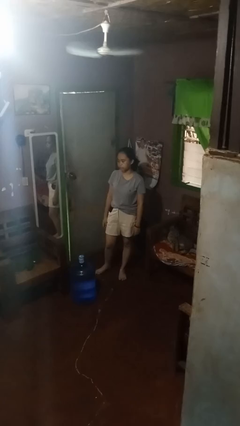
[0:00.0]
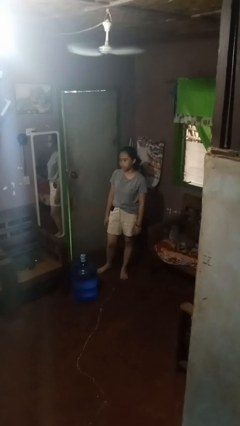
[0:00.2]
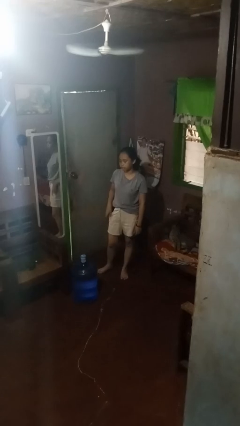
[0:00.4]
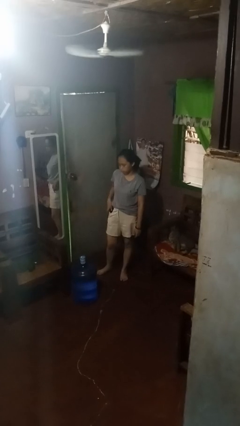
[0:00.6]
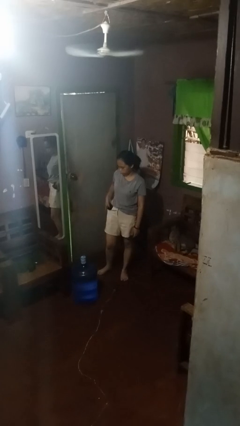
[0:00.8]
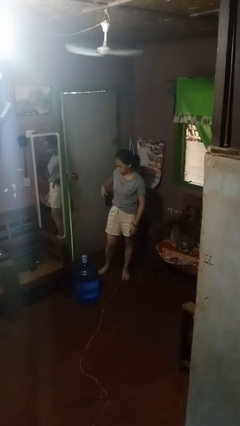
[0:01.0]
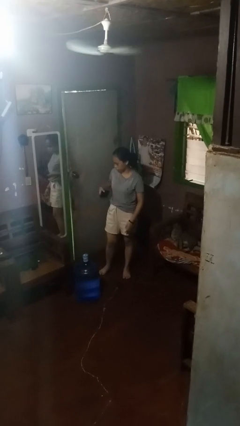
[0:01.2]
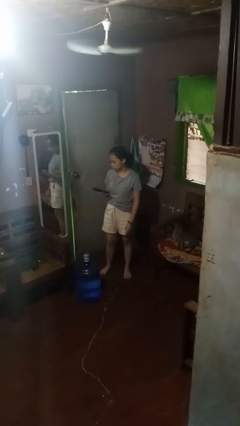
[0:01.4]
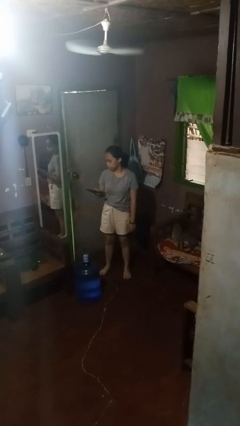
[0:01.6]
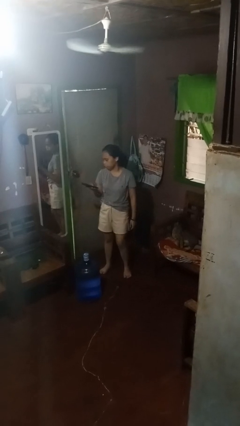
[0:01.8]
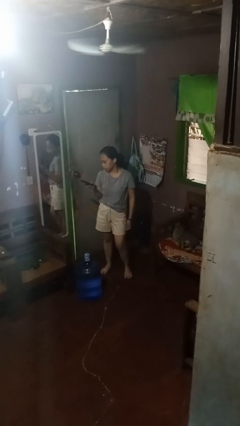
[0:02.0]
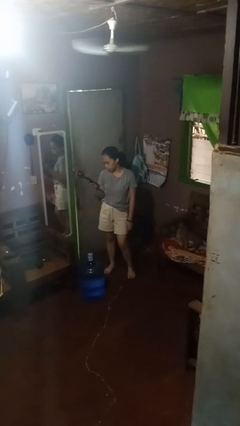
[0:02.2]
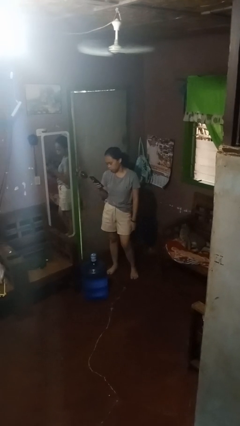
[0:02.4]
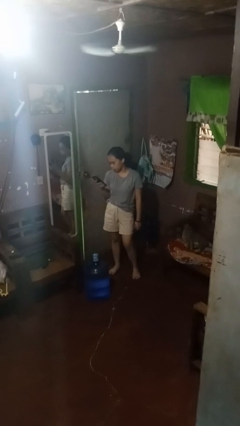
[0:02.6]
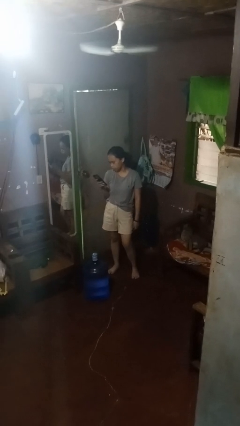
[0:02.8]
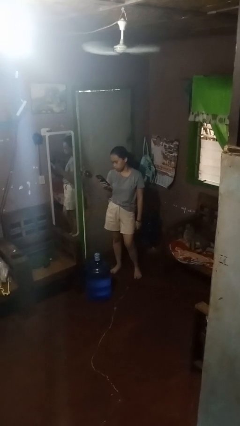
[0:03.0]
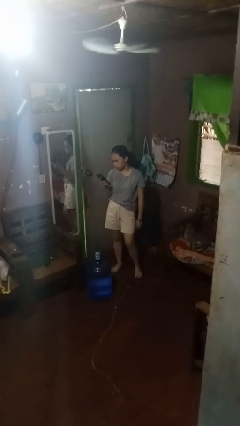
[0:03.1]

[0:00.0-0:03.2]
person takes phone from pocket

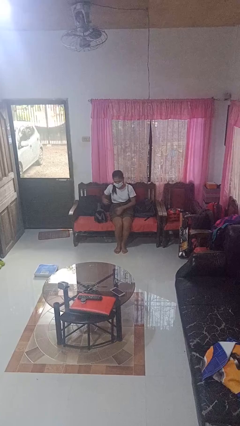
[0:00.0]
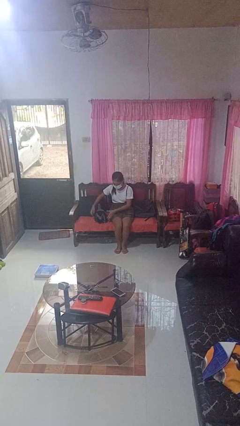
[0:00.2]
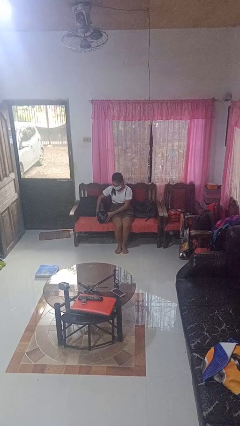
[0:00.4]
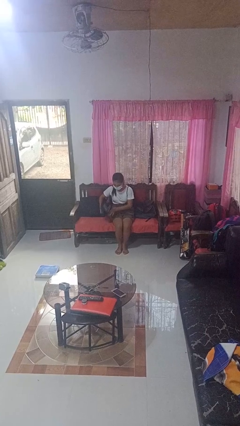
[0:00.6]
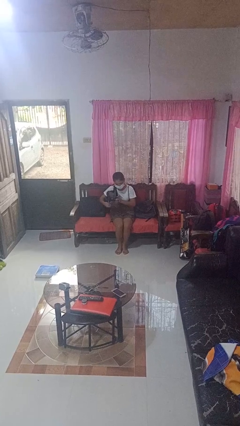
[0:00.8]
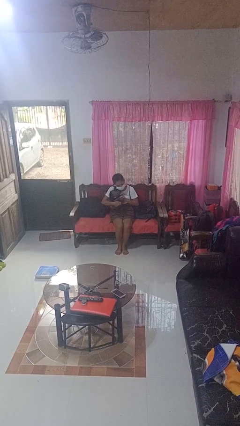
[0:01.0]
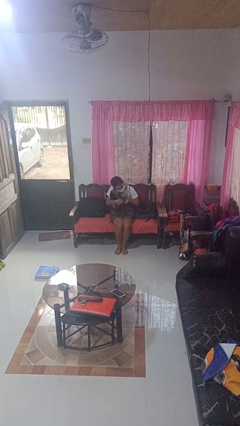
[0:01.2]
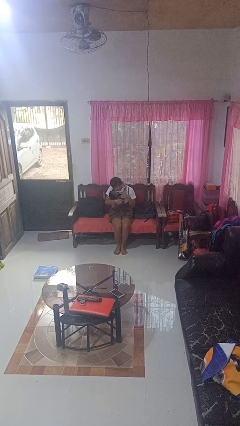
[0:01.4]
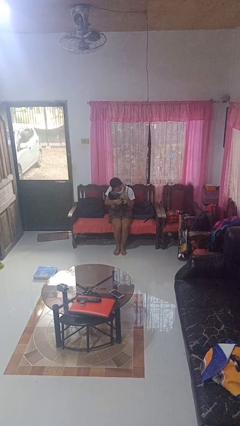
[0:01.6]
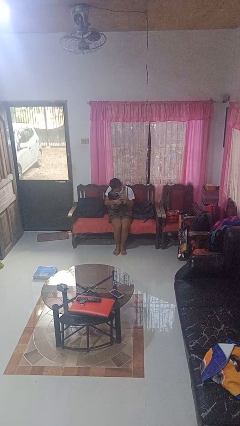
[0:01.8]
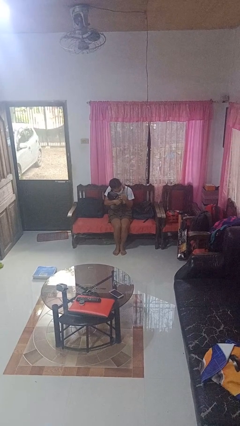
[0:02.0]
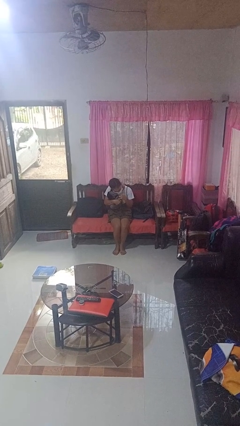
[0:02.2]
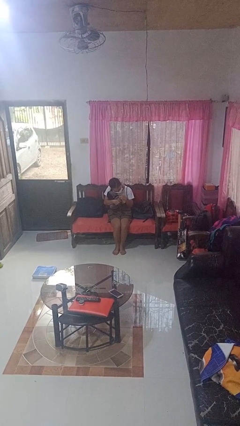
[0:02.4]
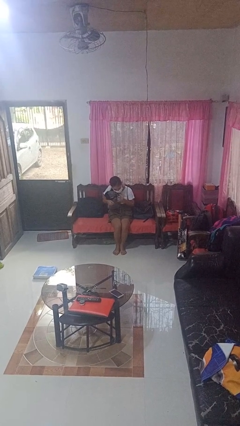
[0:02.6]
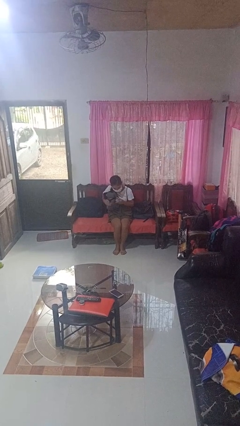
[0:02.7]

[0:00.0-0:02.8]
person hugs stuffed animal

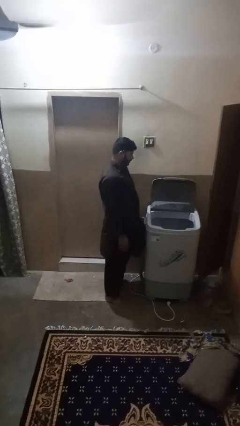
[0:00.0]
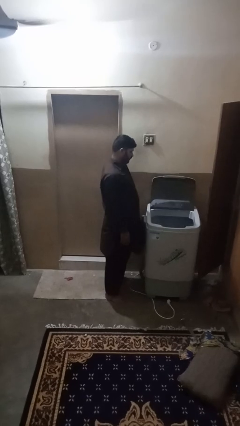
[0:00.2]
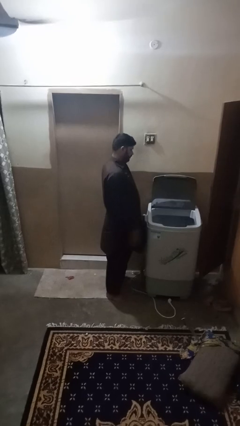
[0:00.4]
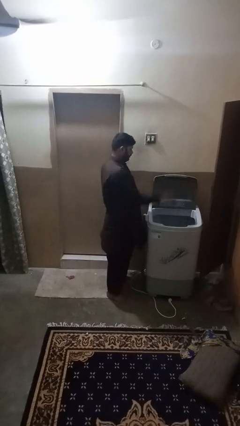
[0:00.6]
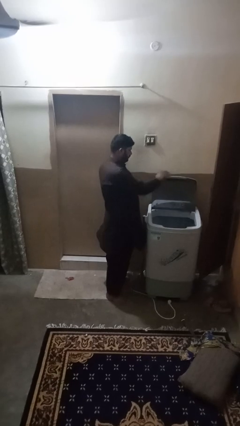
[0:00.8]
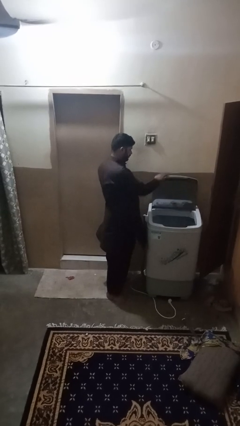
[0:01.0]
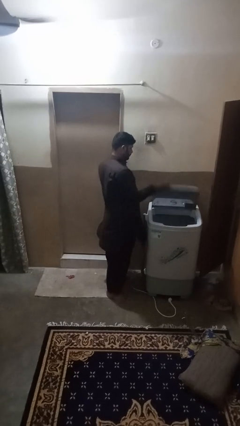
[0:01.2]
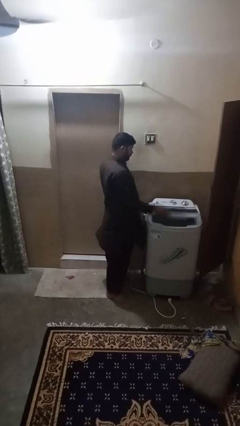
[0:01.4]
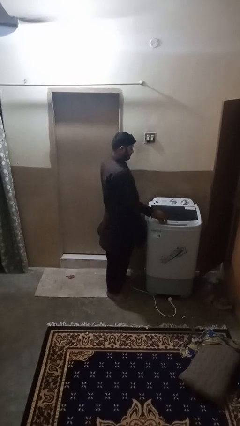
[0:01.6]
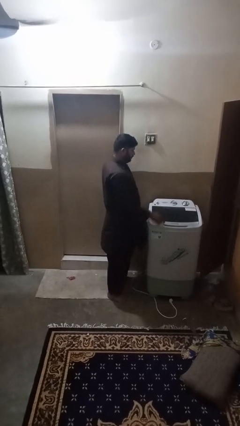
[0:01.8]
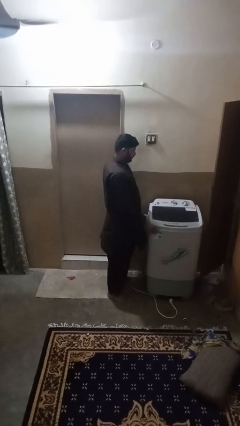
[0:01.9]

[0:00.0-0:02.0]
person closes clothes washer

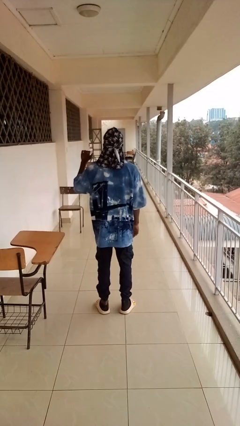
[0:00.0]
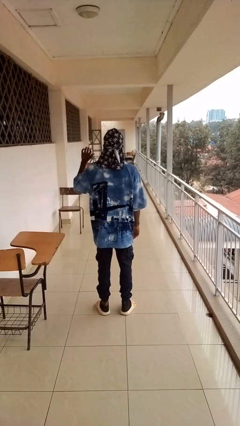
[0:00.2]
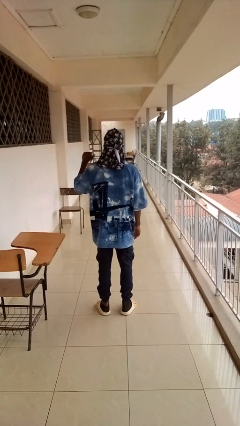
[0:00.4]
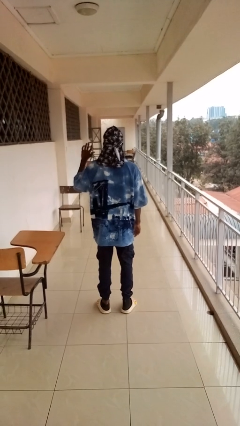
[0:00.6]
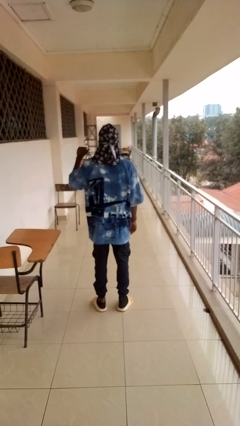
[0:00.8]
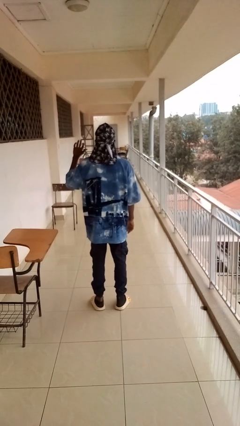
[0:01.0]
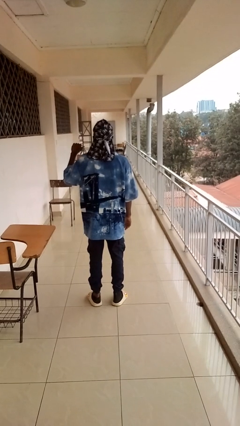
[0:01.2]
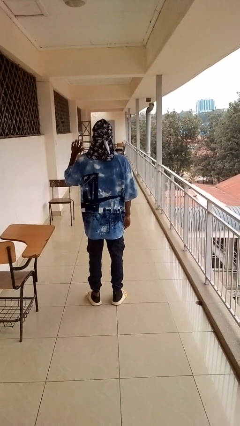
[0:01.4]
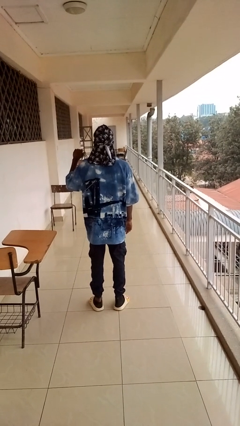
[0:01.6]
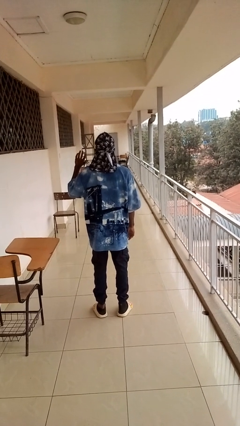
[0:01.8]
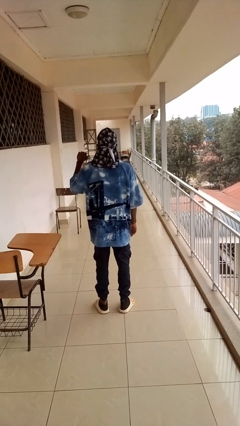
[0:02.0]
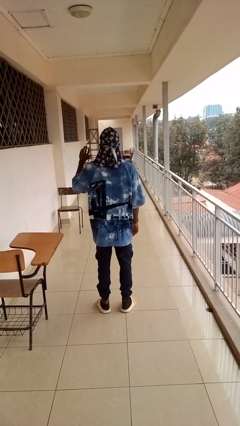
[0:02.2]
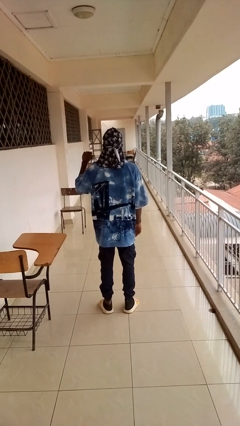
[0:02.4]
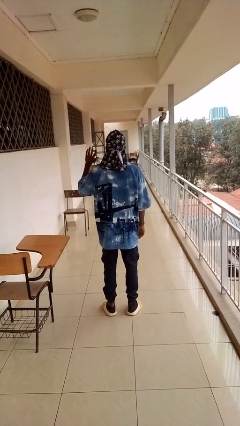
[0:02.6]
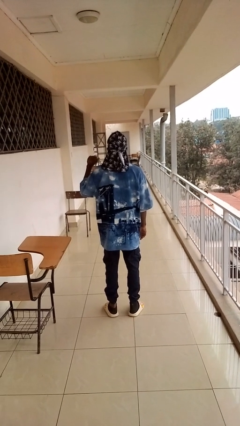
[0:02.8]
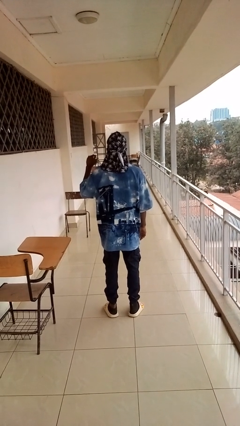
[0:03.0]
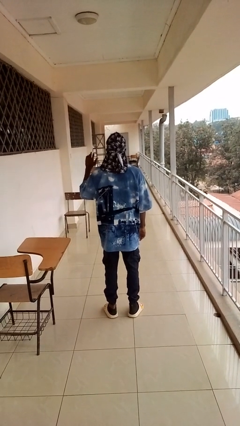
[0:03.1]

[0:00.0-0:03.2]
person gestures come here

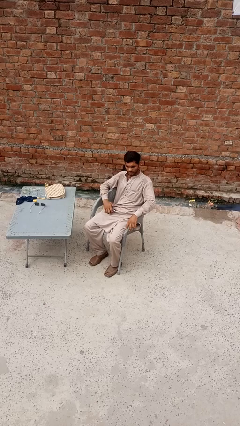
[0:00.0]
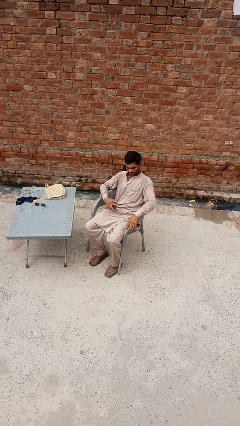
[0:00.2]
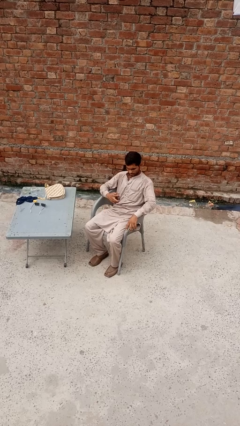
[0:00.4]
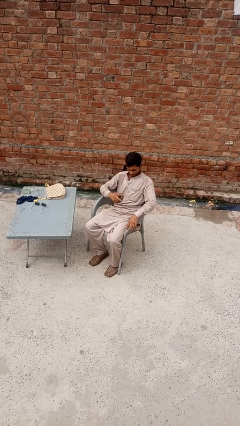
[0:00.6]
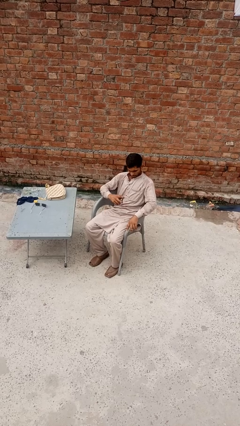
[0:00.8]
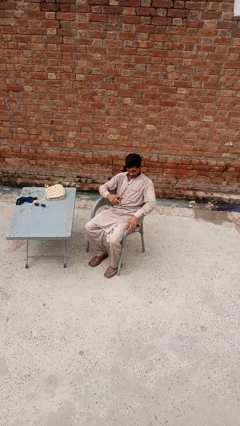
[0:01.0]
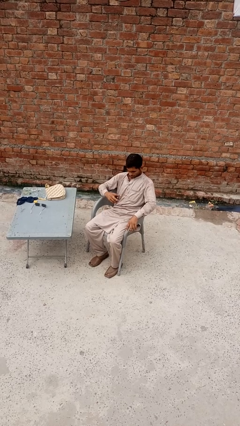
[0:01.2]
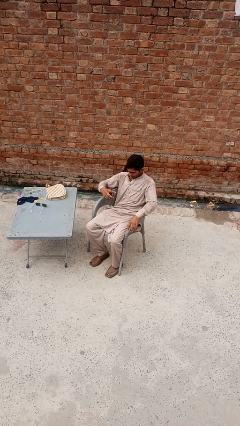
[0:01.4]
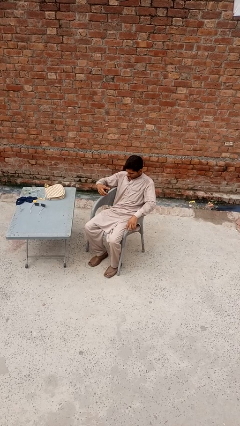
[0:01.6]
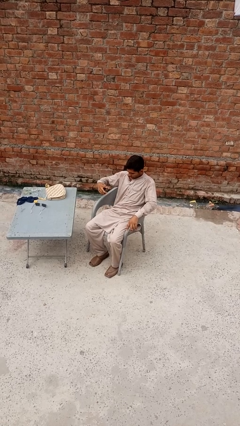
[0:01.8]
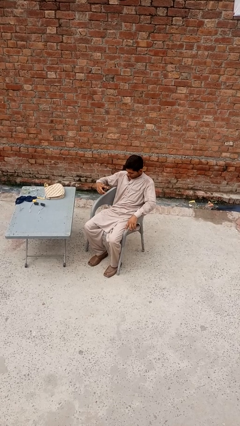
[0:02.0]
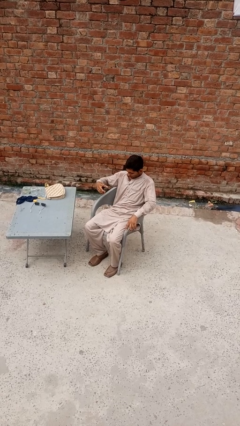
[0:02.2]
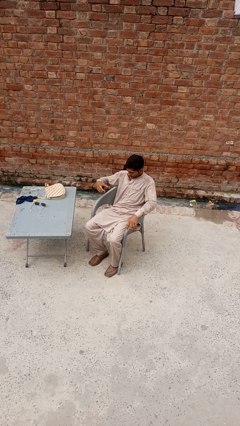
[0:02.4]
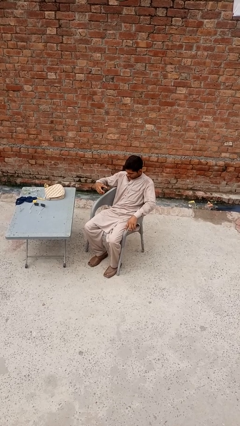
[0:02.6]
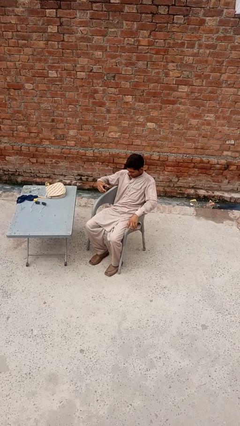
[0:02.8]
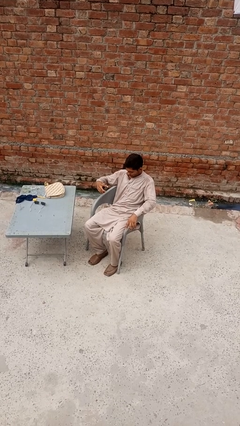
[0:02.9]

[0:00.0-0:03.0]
person applies deodorant

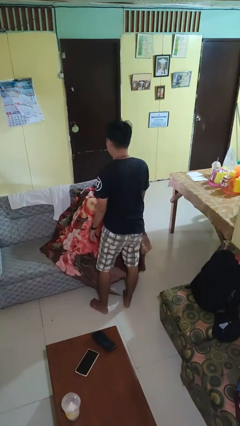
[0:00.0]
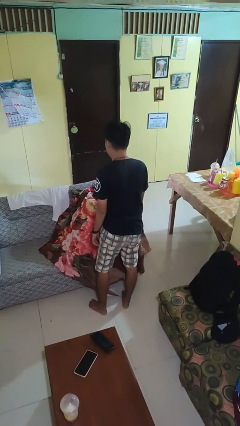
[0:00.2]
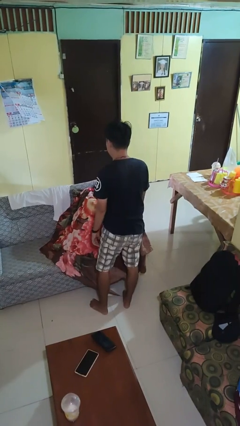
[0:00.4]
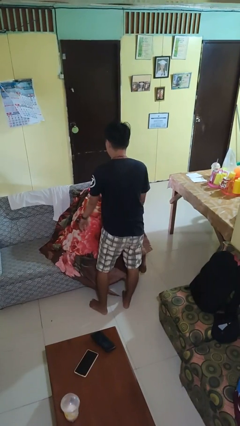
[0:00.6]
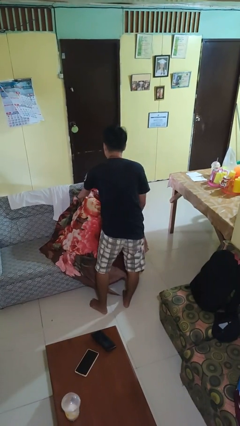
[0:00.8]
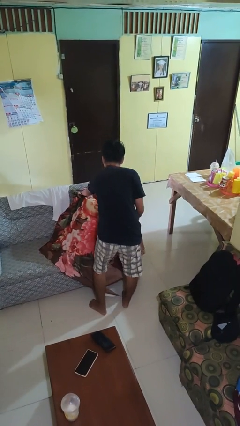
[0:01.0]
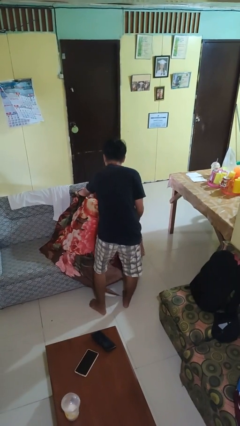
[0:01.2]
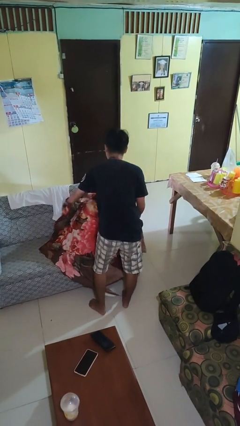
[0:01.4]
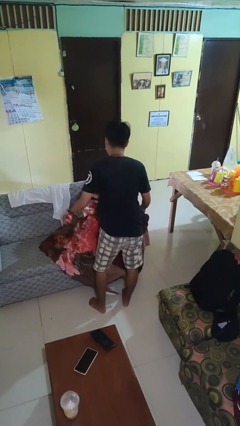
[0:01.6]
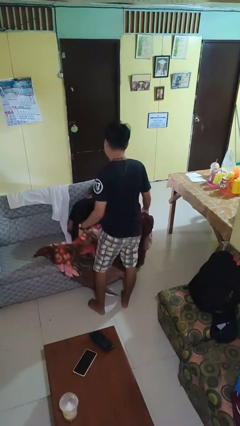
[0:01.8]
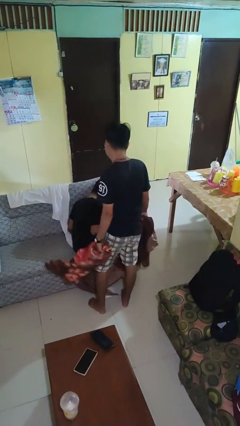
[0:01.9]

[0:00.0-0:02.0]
person uncovers friend with blanket

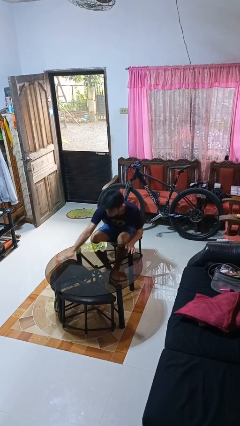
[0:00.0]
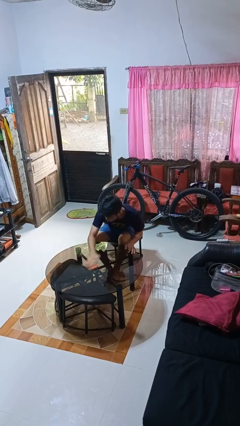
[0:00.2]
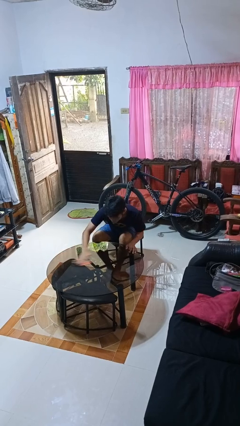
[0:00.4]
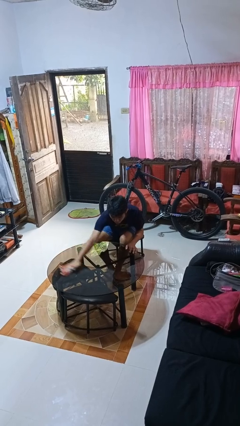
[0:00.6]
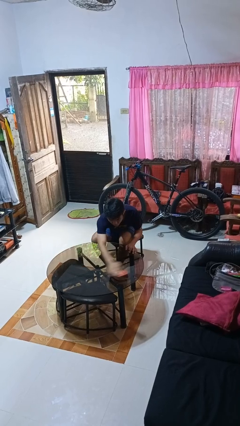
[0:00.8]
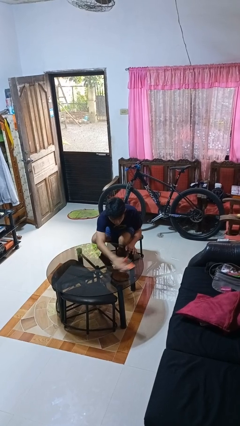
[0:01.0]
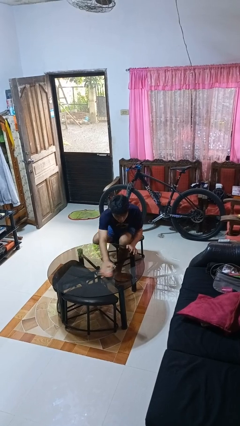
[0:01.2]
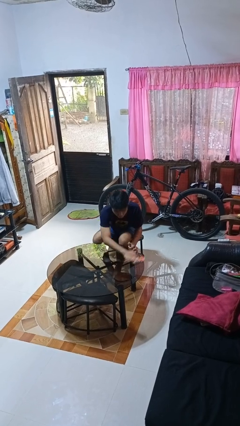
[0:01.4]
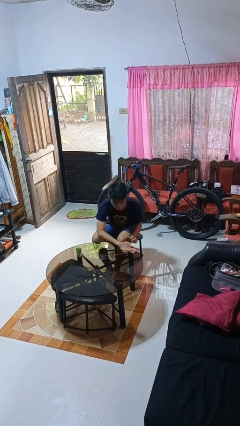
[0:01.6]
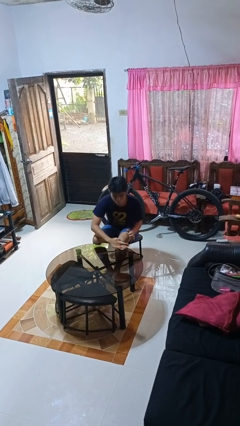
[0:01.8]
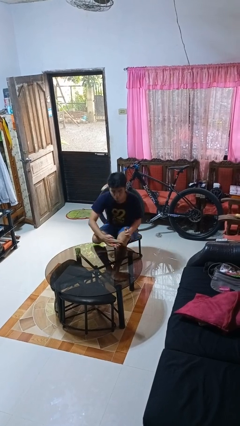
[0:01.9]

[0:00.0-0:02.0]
person cleans table with rag
